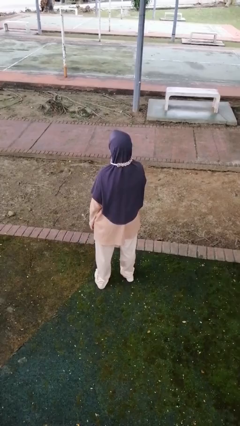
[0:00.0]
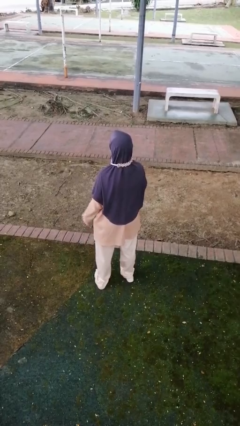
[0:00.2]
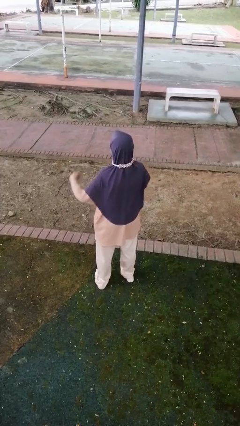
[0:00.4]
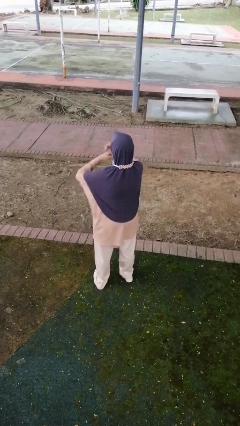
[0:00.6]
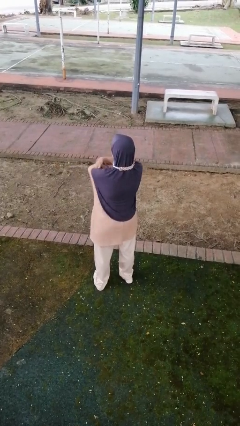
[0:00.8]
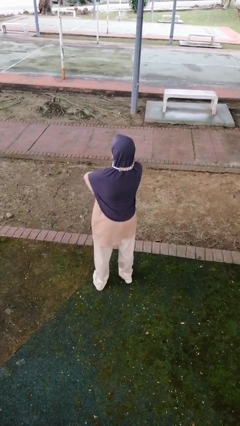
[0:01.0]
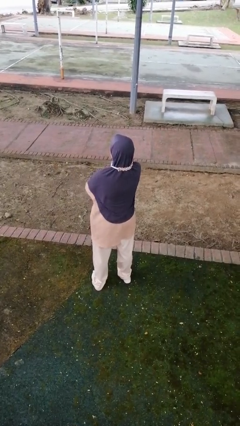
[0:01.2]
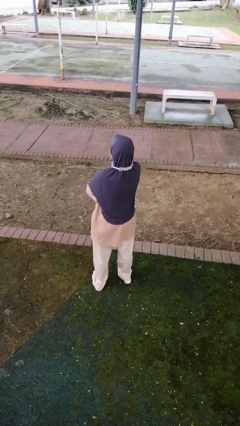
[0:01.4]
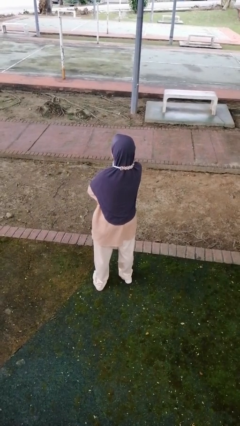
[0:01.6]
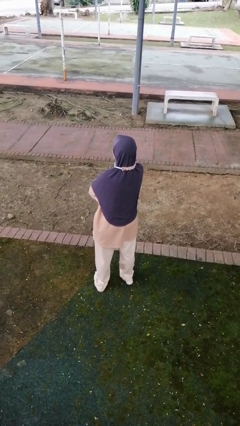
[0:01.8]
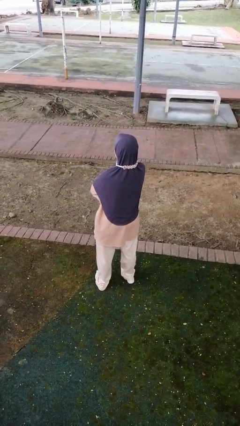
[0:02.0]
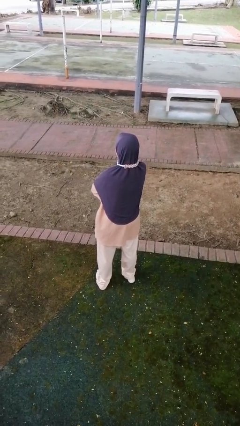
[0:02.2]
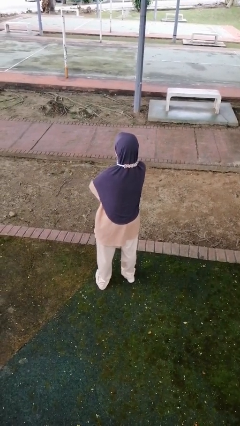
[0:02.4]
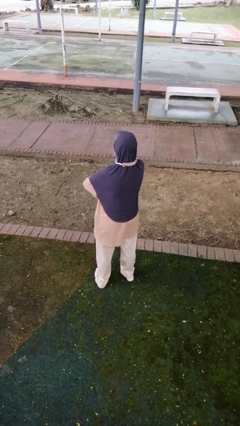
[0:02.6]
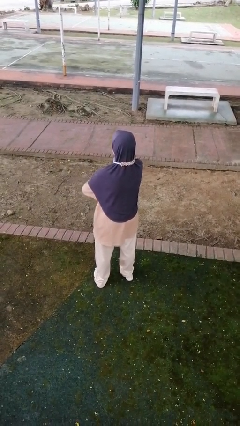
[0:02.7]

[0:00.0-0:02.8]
person crosses arms

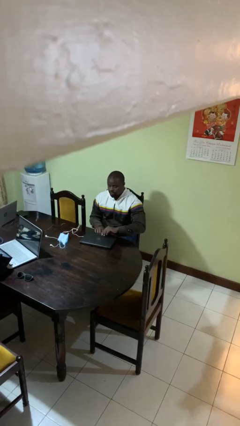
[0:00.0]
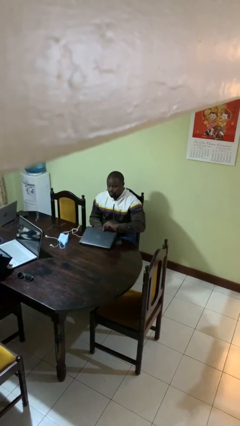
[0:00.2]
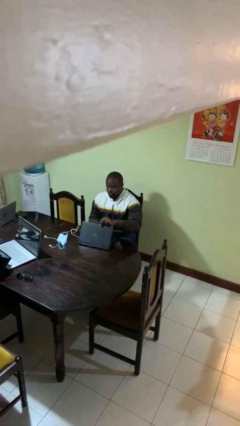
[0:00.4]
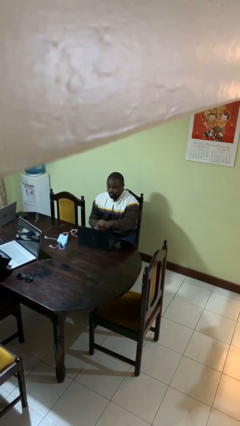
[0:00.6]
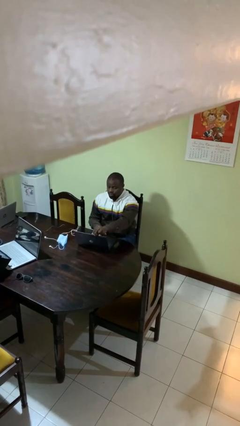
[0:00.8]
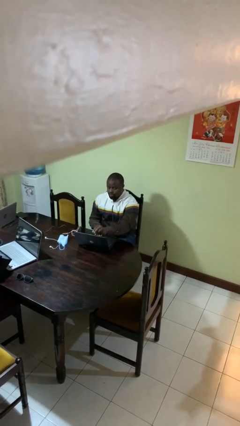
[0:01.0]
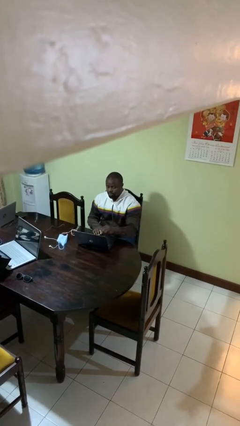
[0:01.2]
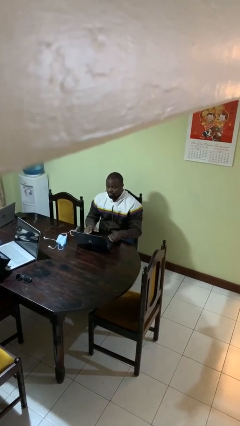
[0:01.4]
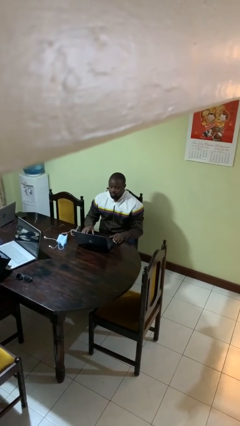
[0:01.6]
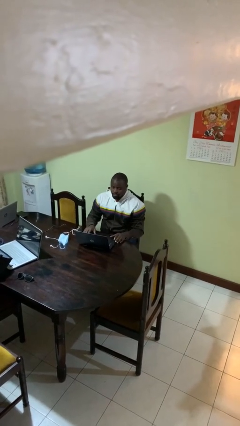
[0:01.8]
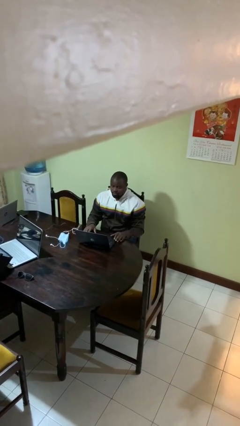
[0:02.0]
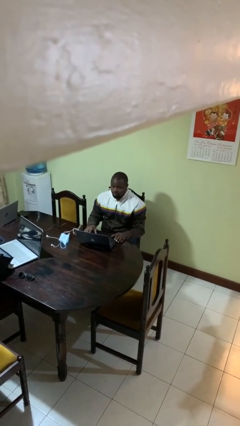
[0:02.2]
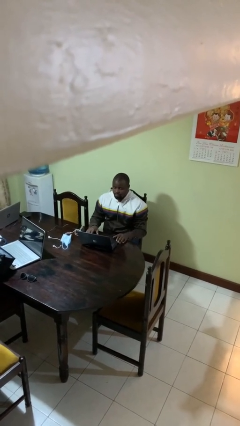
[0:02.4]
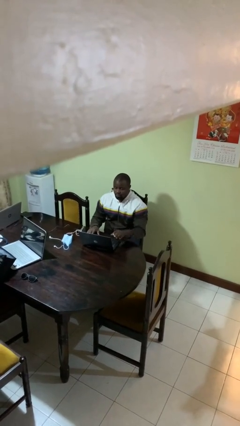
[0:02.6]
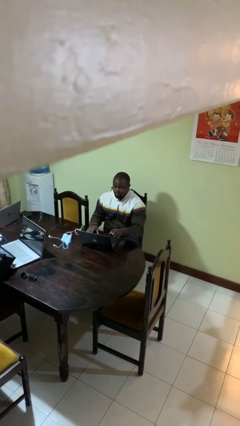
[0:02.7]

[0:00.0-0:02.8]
person opens laptop

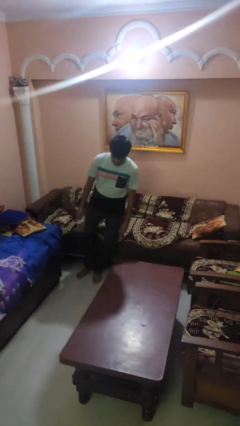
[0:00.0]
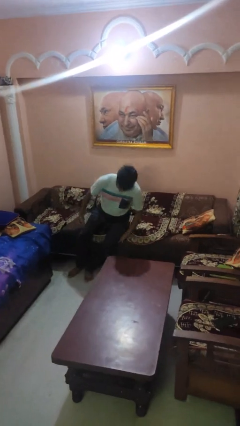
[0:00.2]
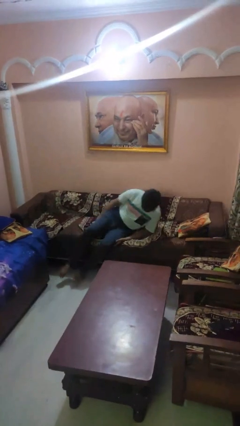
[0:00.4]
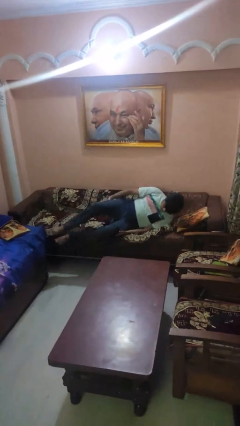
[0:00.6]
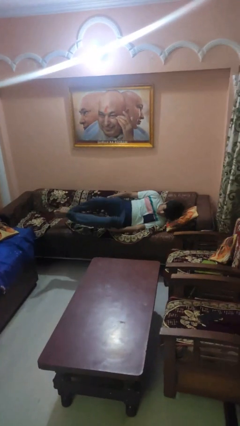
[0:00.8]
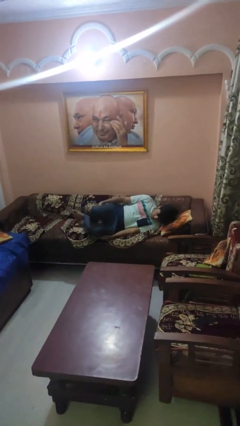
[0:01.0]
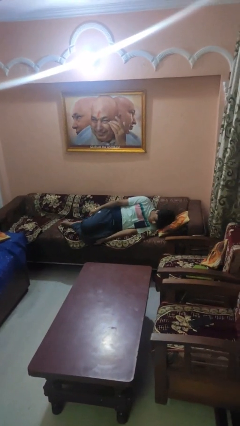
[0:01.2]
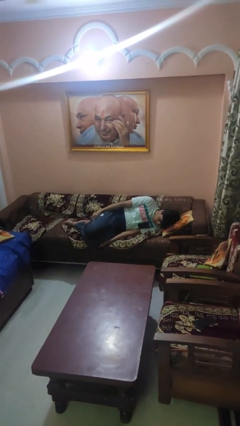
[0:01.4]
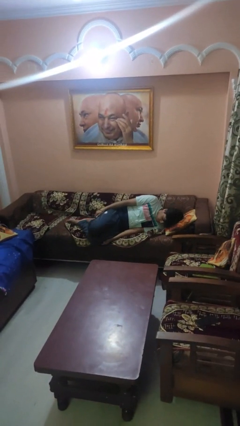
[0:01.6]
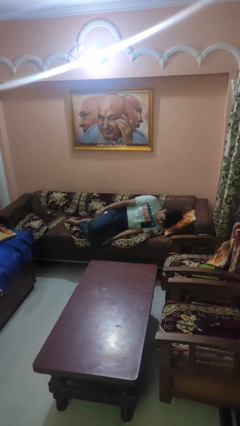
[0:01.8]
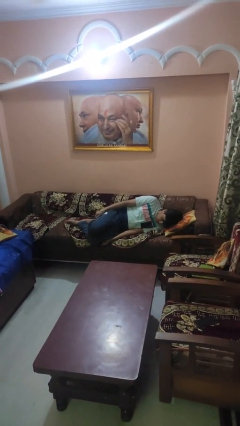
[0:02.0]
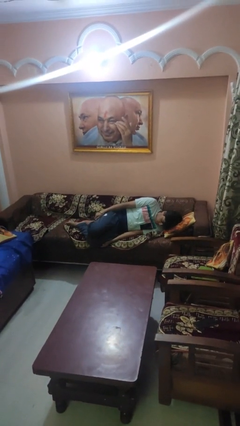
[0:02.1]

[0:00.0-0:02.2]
person lies down on couch

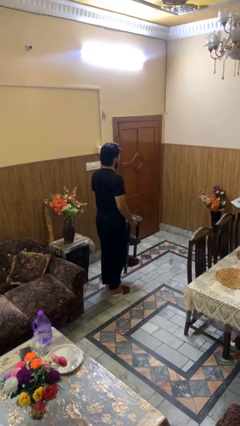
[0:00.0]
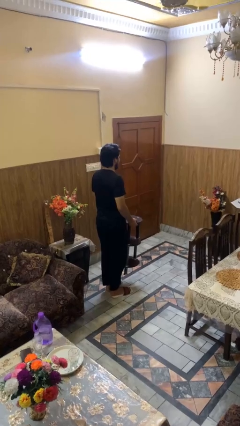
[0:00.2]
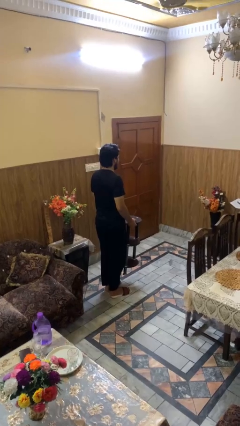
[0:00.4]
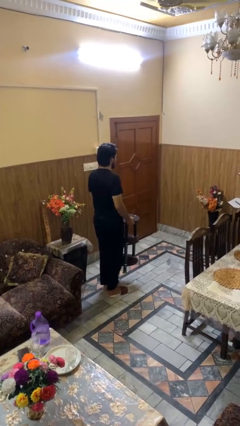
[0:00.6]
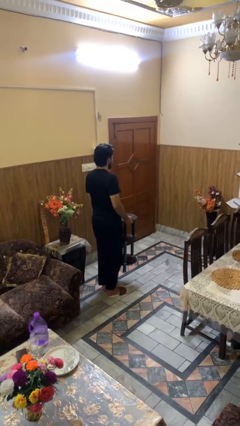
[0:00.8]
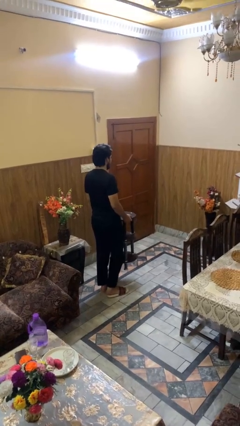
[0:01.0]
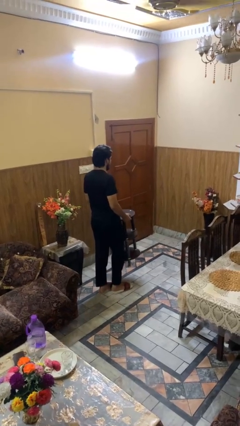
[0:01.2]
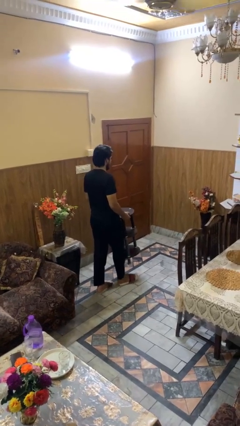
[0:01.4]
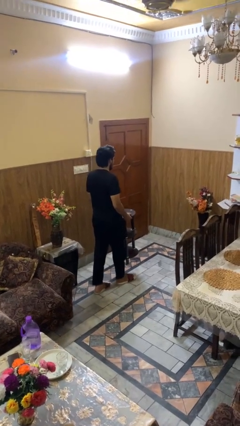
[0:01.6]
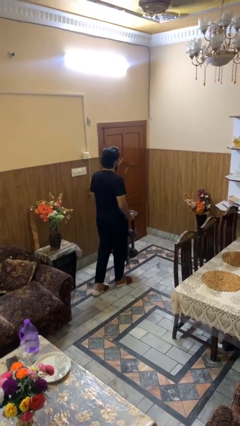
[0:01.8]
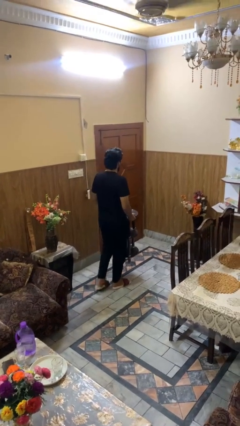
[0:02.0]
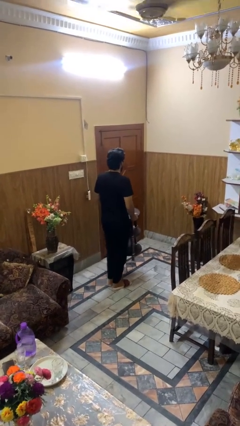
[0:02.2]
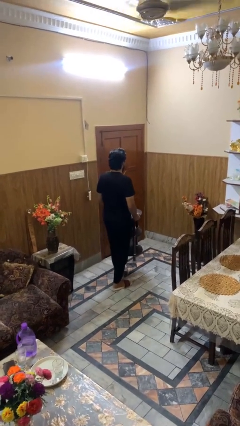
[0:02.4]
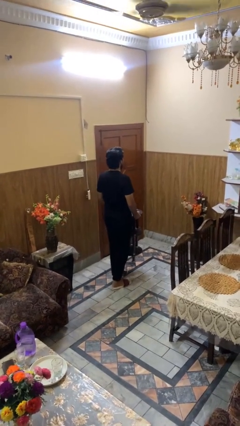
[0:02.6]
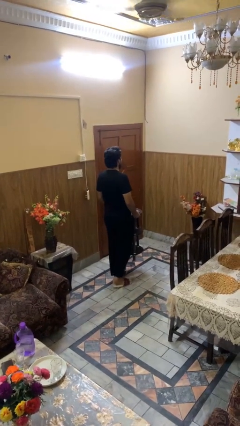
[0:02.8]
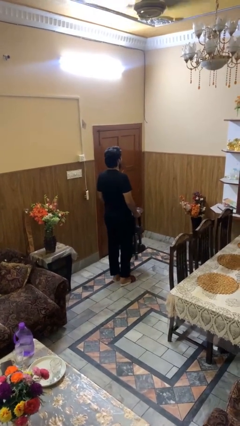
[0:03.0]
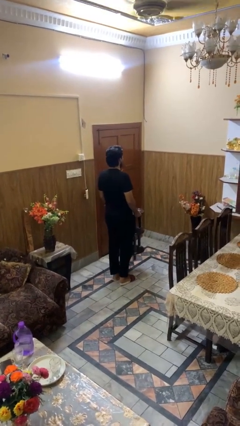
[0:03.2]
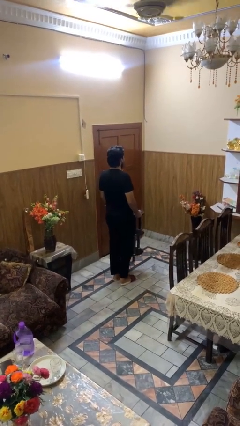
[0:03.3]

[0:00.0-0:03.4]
person carries furniture

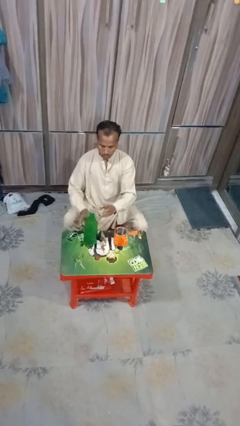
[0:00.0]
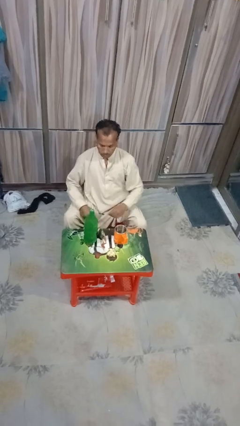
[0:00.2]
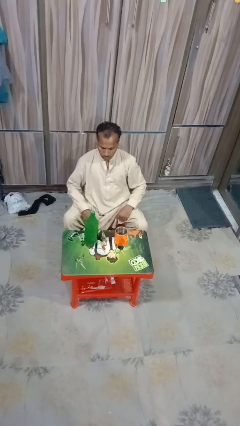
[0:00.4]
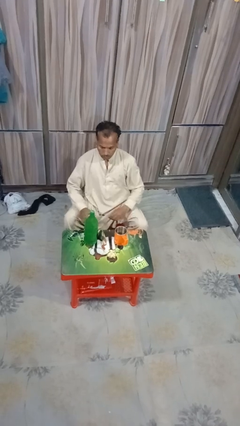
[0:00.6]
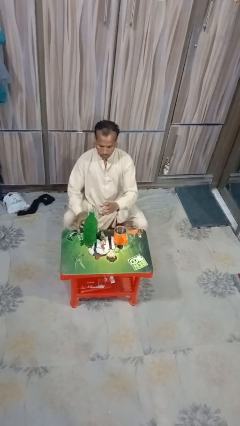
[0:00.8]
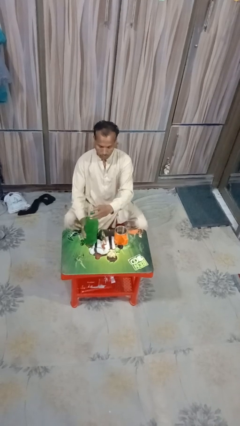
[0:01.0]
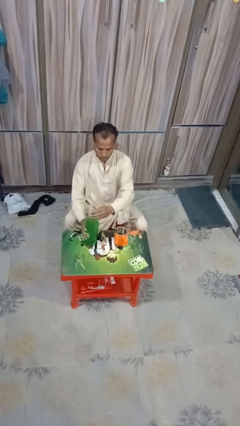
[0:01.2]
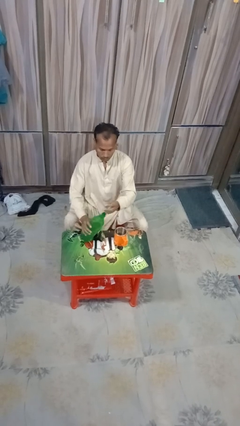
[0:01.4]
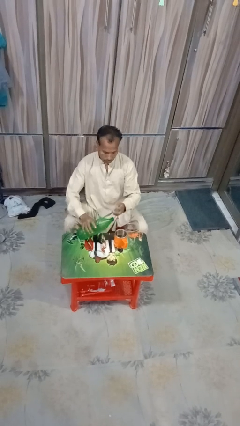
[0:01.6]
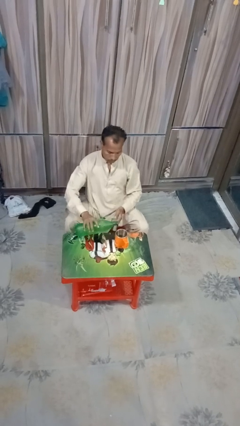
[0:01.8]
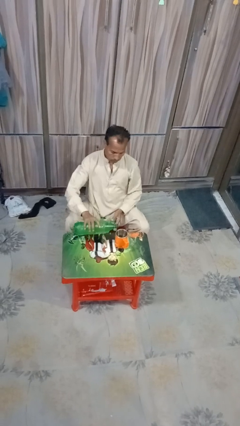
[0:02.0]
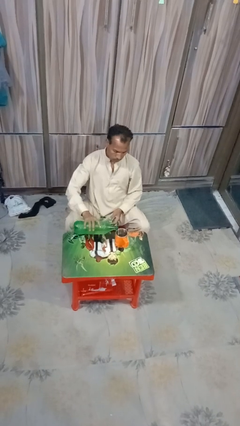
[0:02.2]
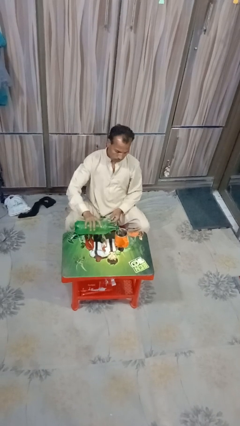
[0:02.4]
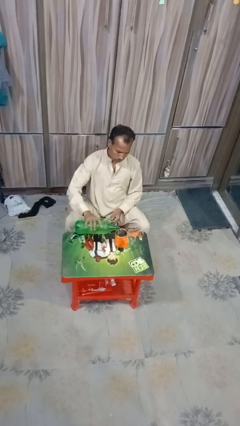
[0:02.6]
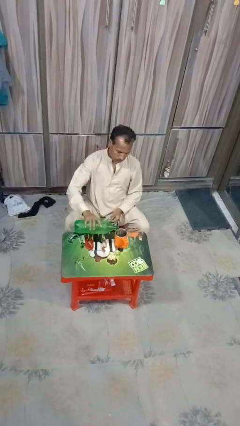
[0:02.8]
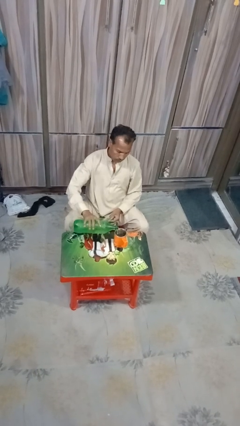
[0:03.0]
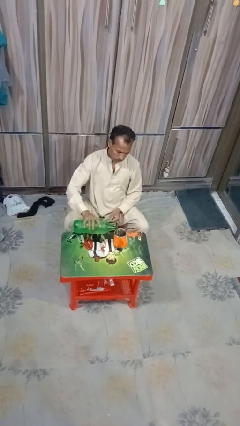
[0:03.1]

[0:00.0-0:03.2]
person pours liquid into cup

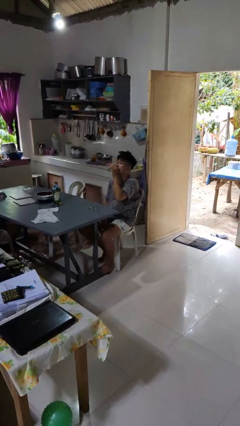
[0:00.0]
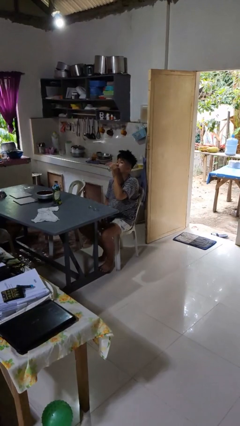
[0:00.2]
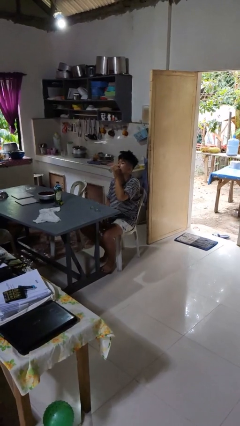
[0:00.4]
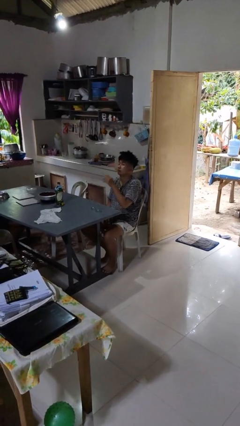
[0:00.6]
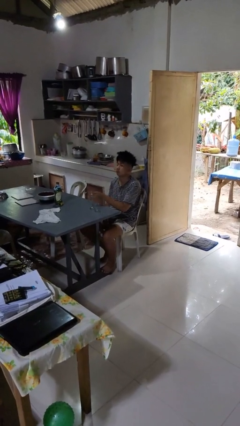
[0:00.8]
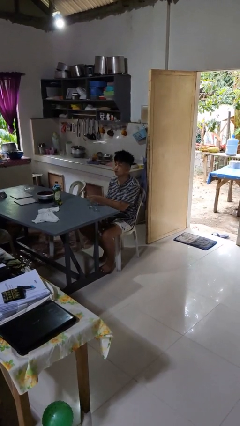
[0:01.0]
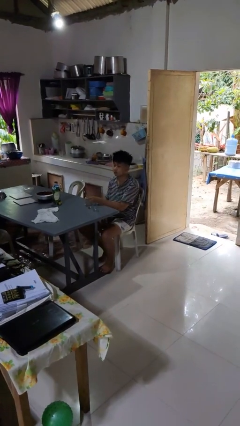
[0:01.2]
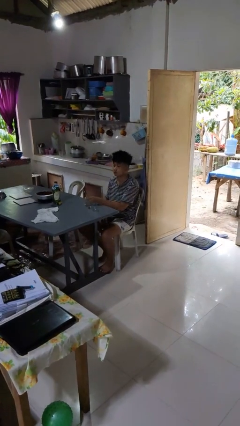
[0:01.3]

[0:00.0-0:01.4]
person puts down object on table

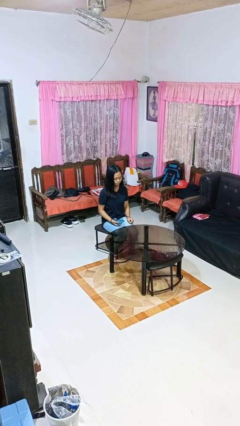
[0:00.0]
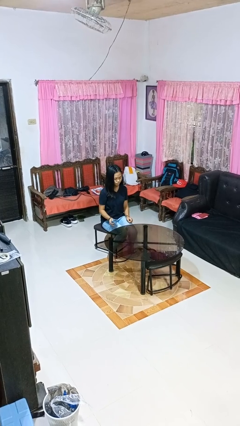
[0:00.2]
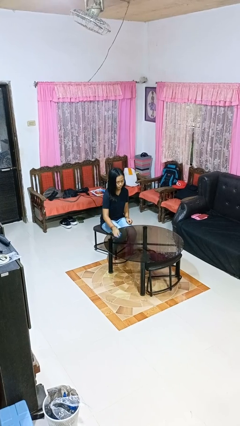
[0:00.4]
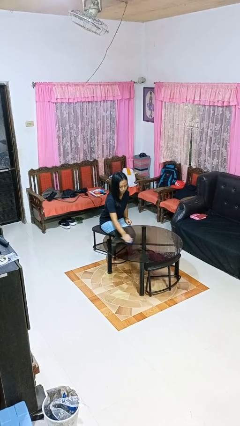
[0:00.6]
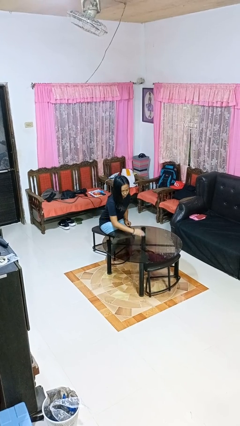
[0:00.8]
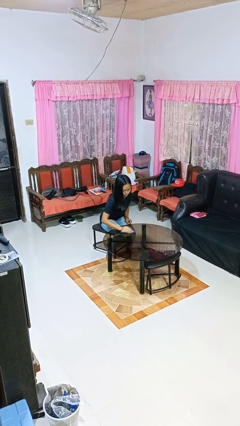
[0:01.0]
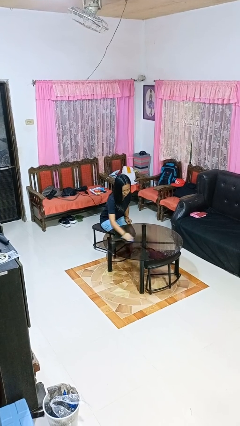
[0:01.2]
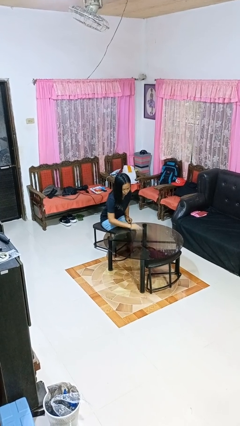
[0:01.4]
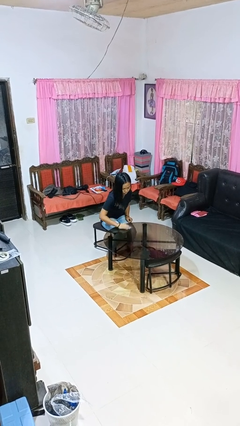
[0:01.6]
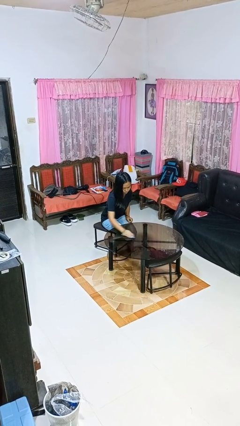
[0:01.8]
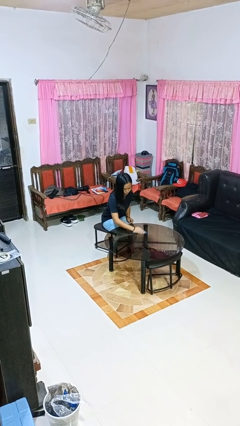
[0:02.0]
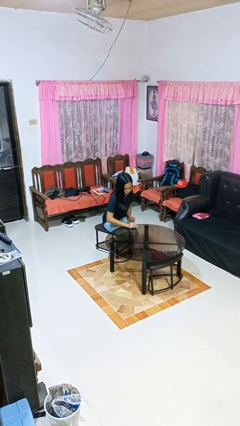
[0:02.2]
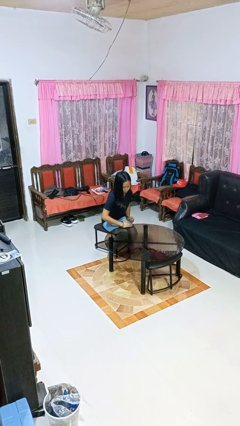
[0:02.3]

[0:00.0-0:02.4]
person cleans table with rag
